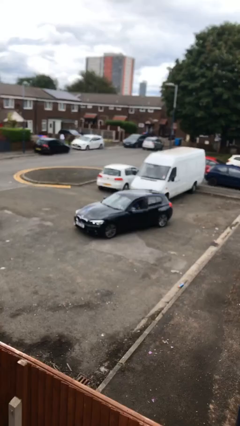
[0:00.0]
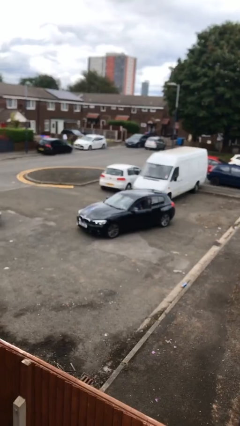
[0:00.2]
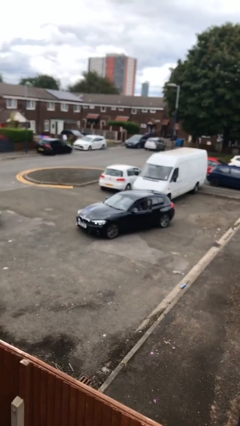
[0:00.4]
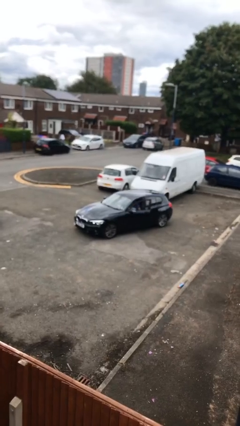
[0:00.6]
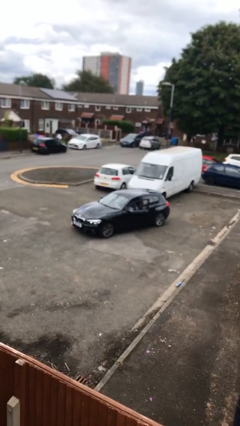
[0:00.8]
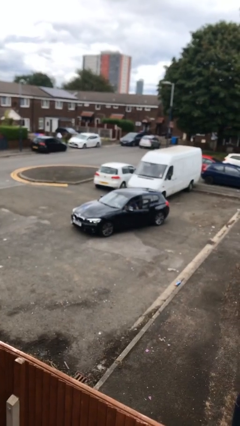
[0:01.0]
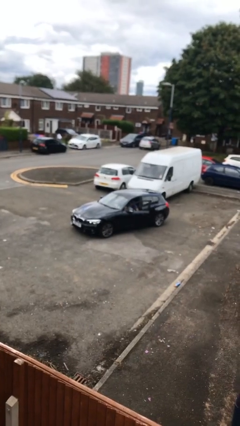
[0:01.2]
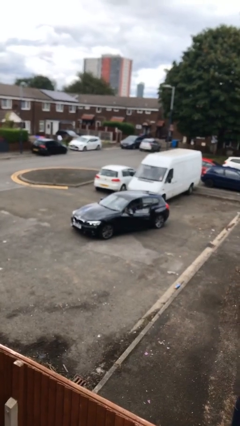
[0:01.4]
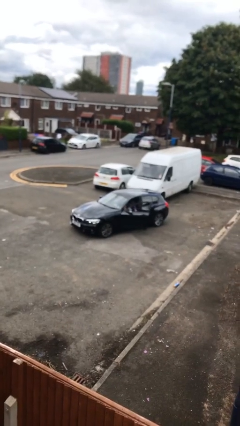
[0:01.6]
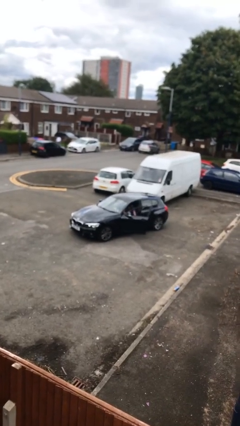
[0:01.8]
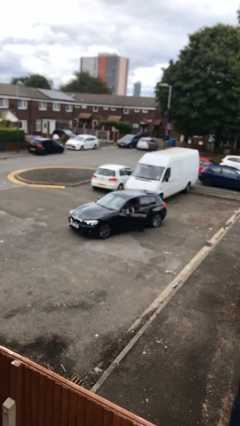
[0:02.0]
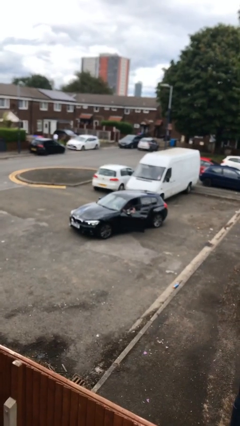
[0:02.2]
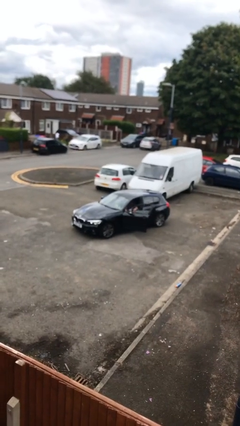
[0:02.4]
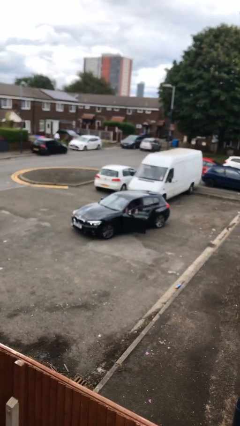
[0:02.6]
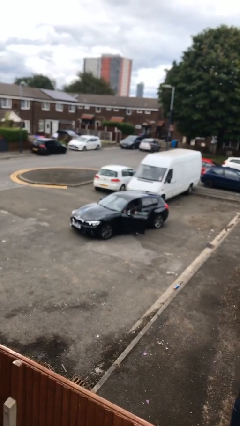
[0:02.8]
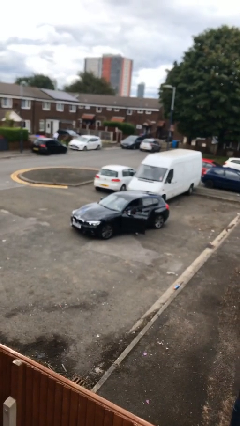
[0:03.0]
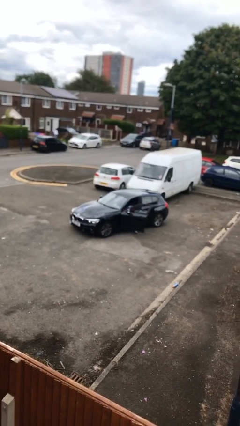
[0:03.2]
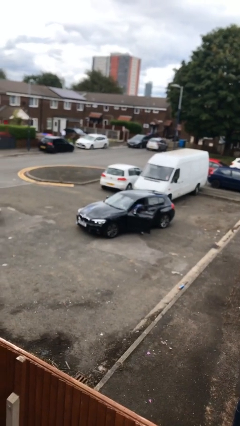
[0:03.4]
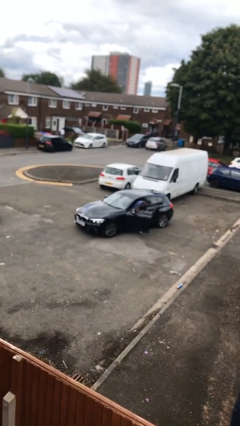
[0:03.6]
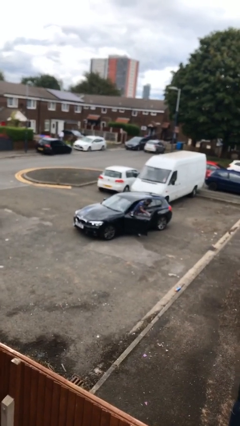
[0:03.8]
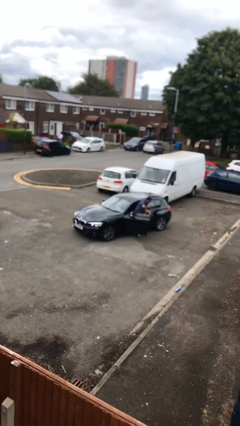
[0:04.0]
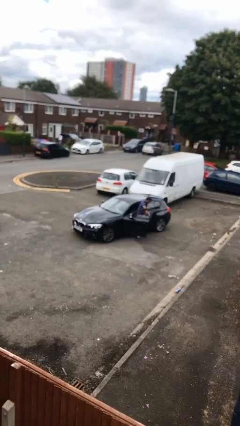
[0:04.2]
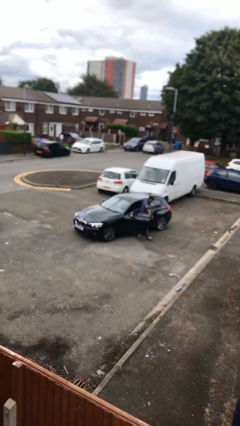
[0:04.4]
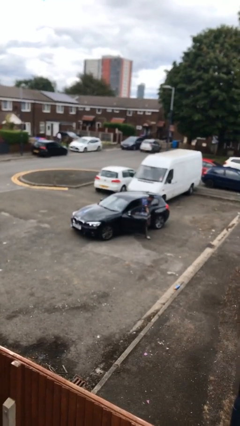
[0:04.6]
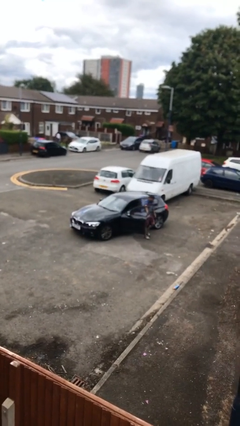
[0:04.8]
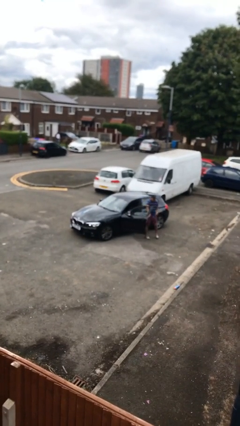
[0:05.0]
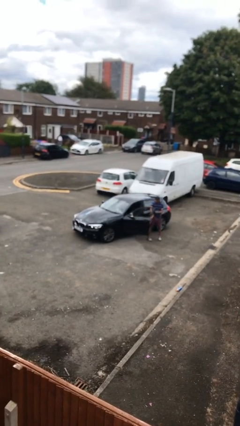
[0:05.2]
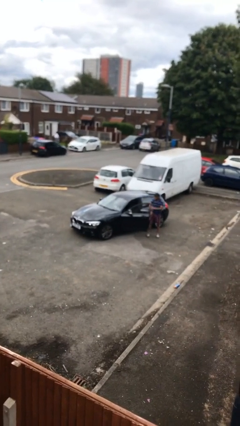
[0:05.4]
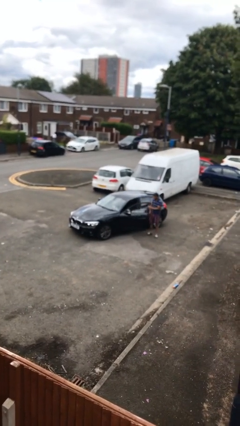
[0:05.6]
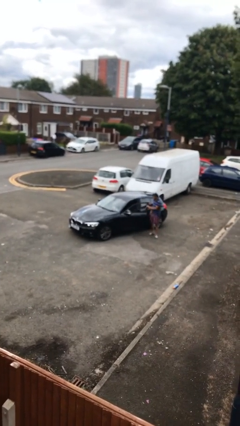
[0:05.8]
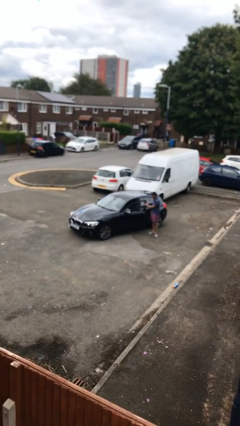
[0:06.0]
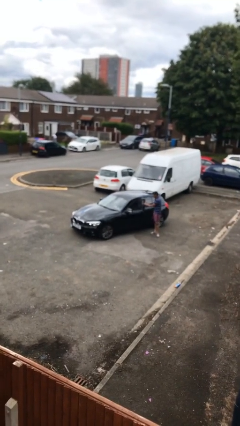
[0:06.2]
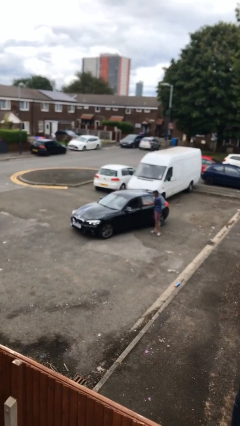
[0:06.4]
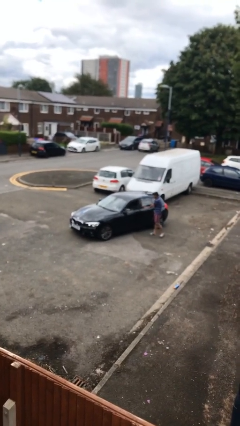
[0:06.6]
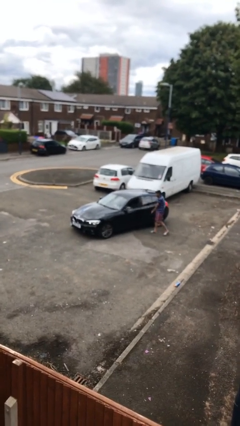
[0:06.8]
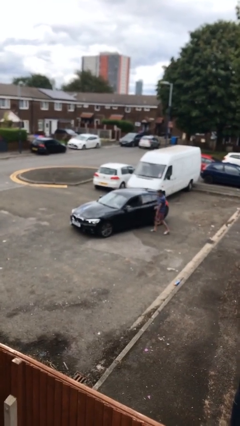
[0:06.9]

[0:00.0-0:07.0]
car drops off person

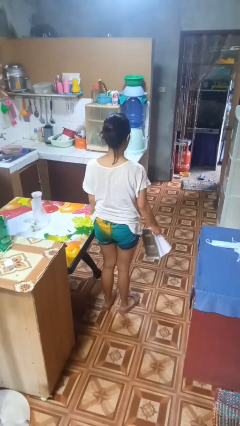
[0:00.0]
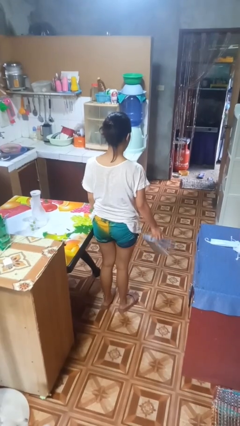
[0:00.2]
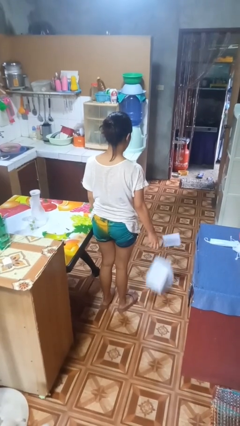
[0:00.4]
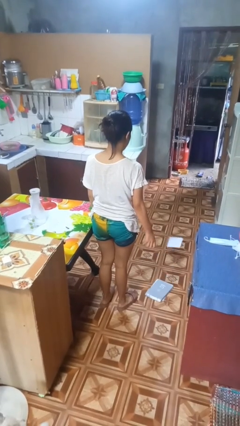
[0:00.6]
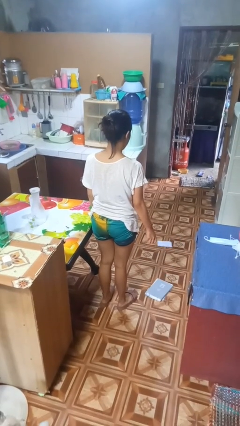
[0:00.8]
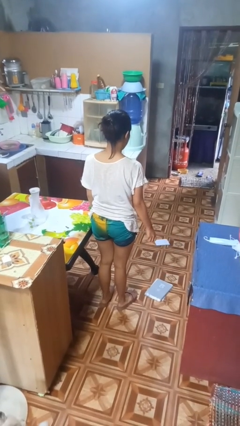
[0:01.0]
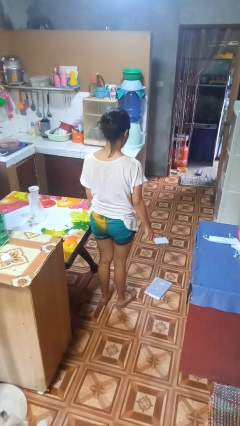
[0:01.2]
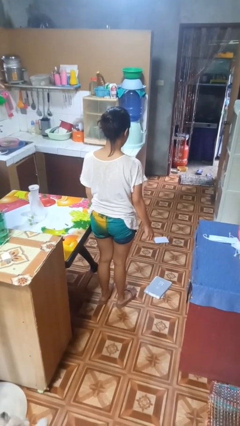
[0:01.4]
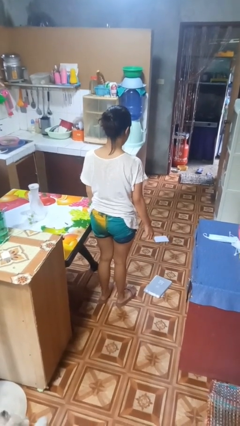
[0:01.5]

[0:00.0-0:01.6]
person drops object

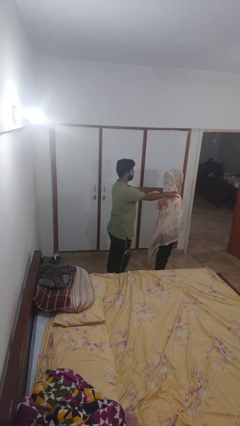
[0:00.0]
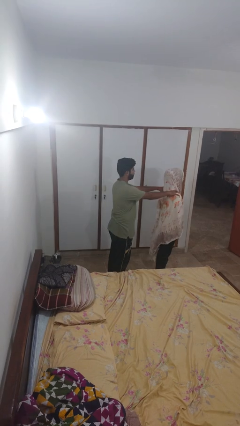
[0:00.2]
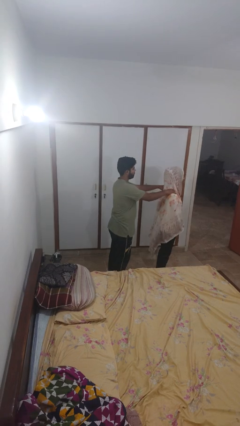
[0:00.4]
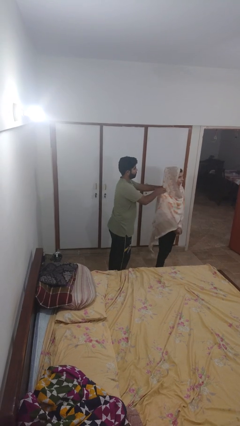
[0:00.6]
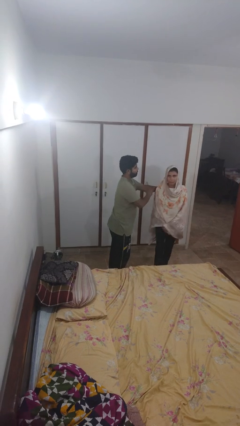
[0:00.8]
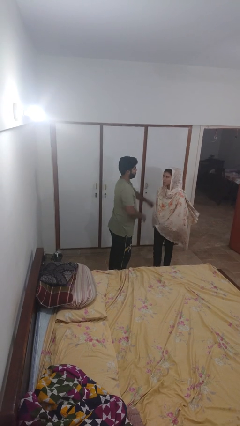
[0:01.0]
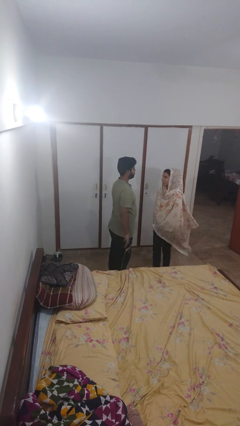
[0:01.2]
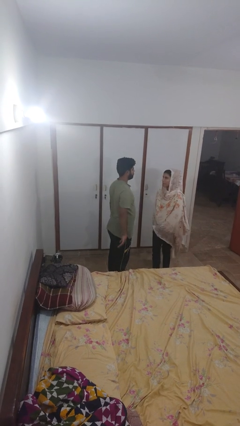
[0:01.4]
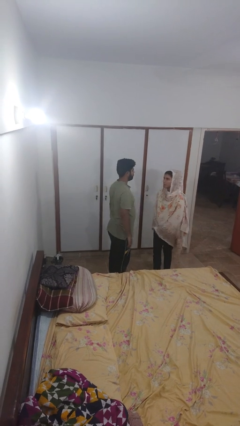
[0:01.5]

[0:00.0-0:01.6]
person spins person around

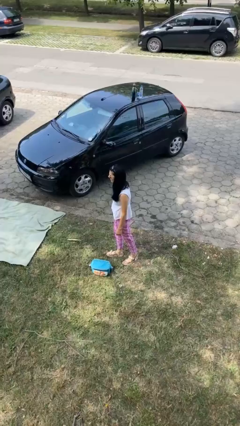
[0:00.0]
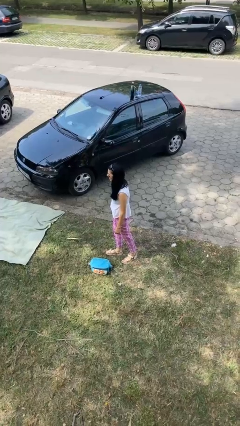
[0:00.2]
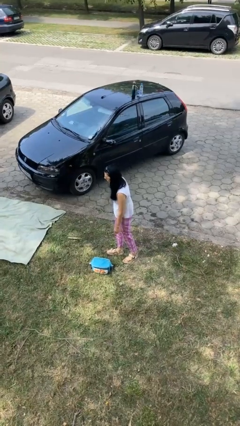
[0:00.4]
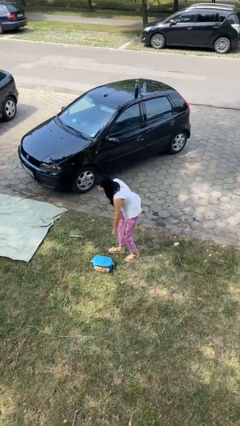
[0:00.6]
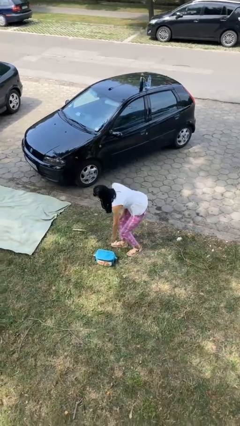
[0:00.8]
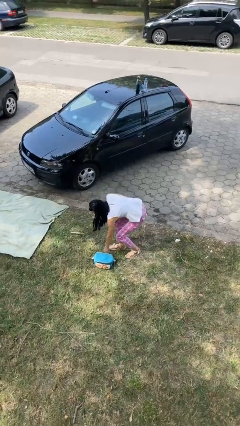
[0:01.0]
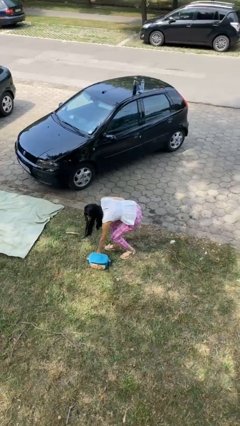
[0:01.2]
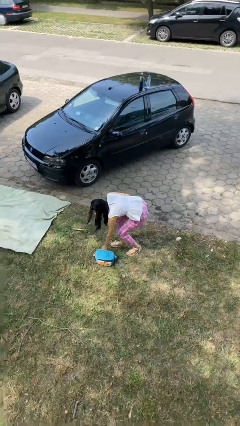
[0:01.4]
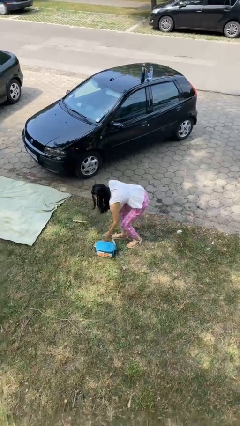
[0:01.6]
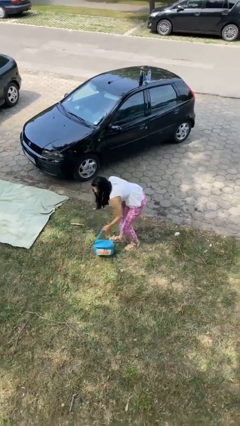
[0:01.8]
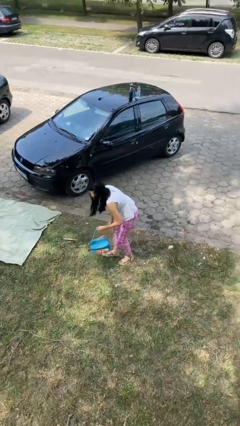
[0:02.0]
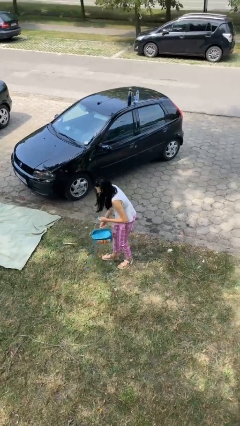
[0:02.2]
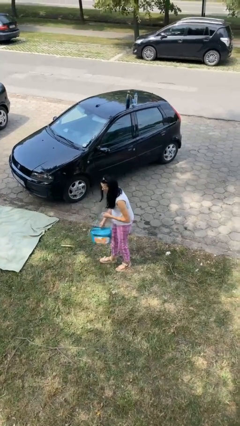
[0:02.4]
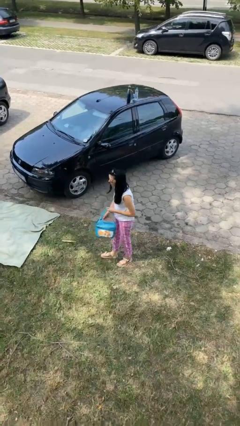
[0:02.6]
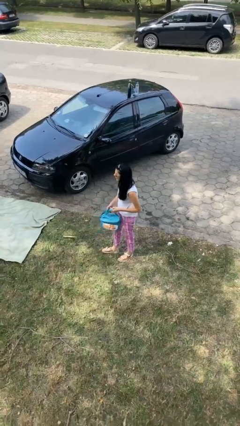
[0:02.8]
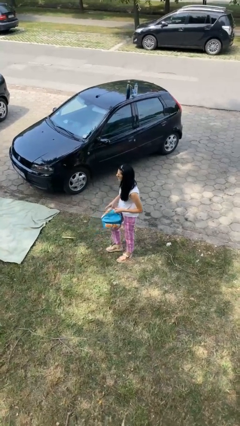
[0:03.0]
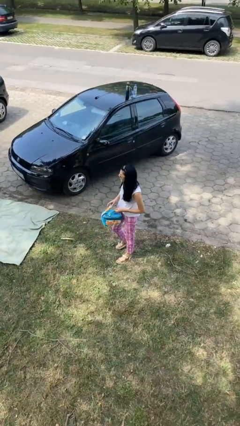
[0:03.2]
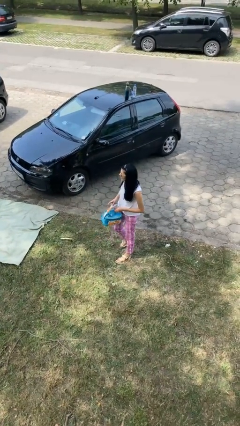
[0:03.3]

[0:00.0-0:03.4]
person picks up object from floor

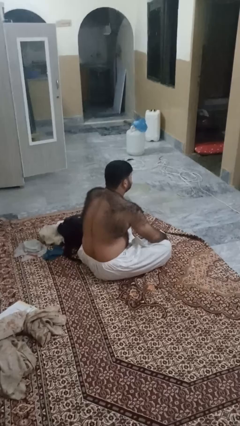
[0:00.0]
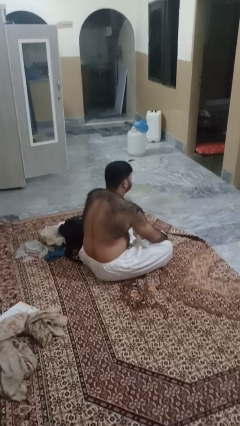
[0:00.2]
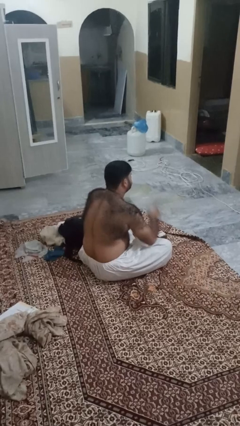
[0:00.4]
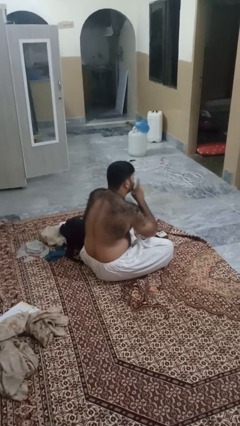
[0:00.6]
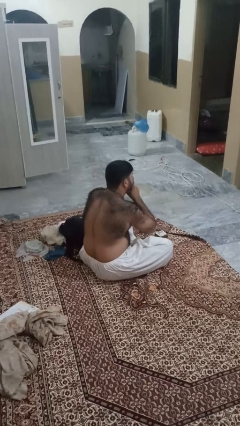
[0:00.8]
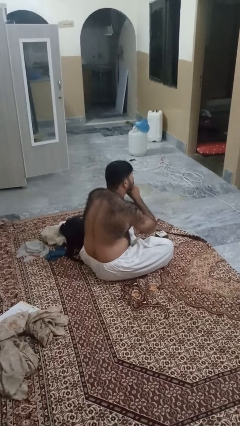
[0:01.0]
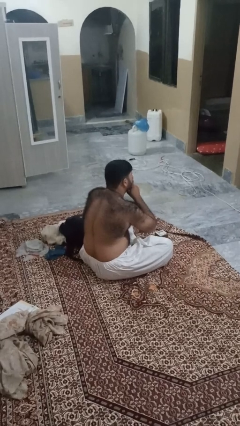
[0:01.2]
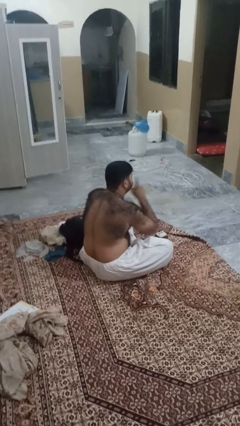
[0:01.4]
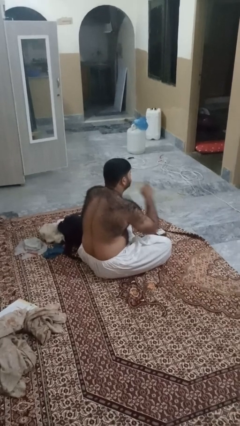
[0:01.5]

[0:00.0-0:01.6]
person gestures be quiet

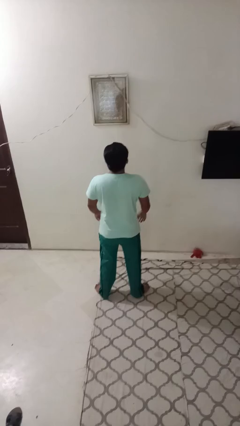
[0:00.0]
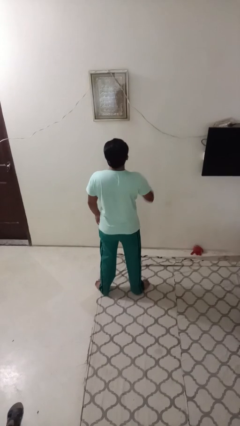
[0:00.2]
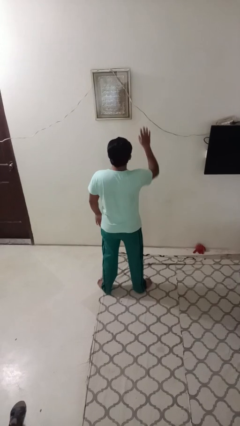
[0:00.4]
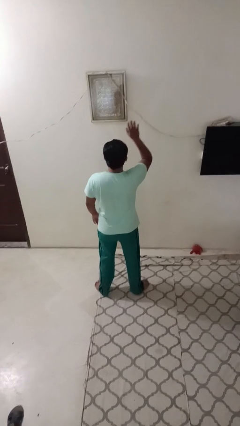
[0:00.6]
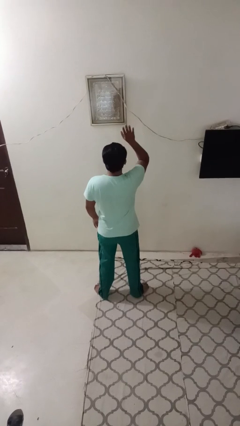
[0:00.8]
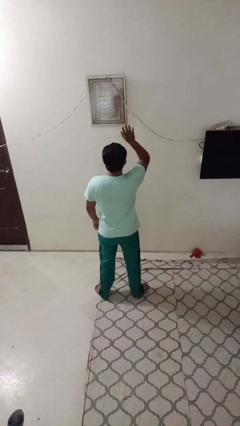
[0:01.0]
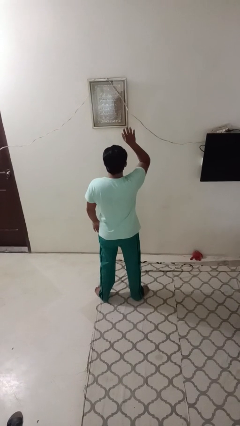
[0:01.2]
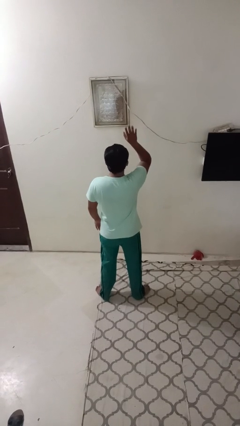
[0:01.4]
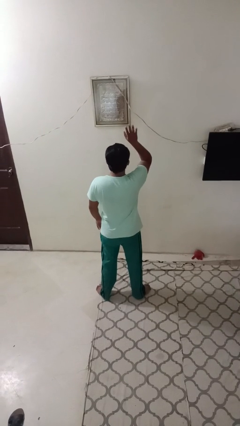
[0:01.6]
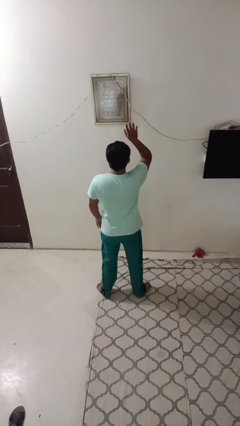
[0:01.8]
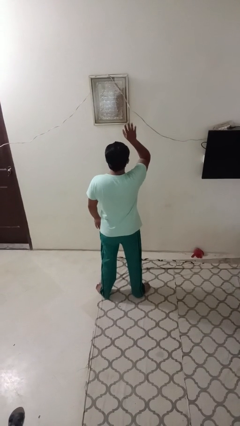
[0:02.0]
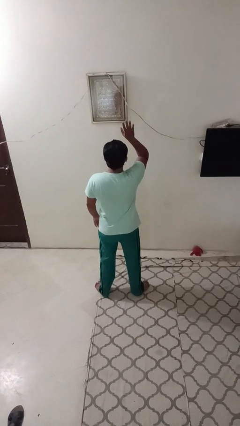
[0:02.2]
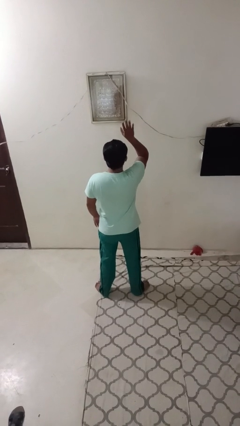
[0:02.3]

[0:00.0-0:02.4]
person gestures raise hand

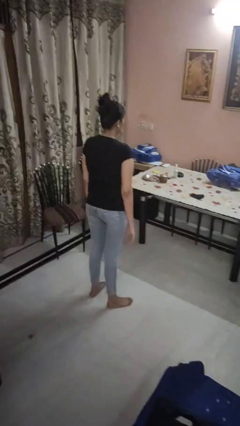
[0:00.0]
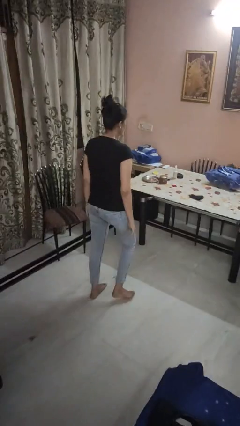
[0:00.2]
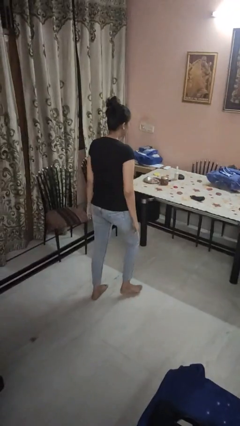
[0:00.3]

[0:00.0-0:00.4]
person throws object on table
